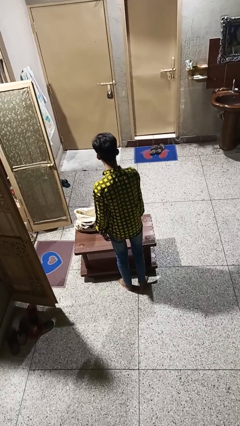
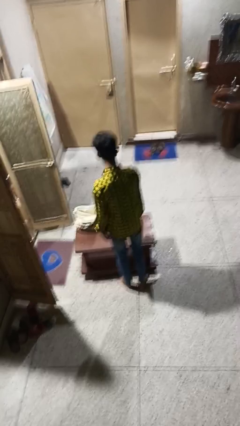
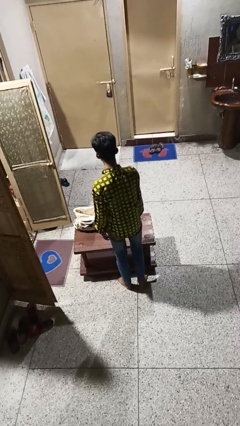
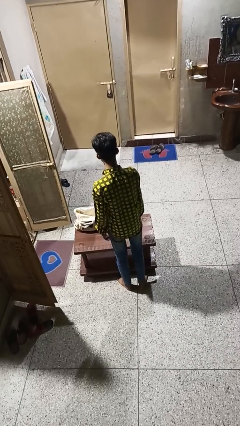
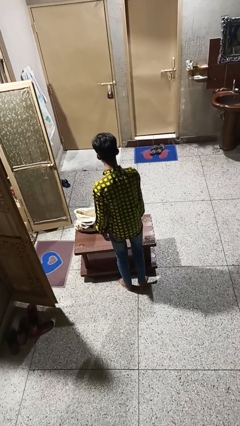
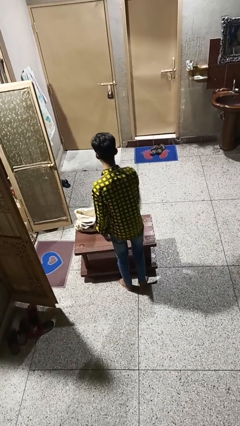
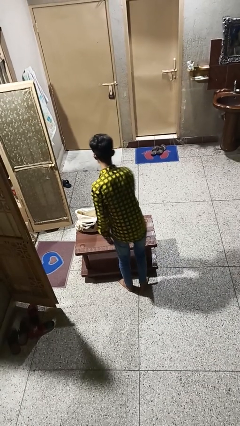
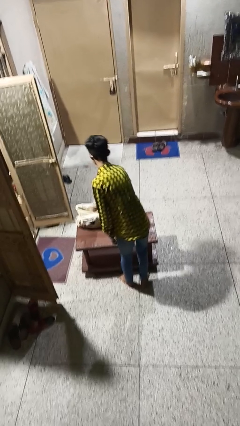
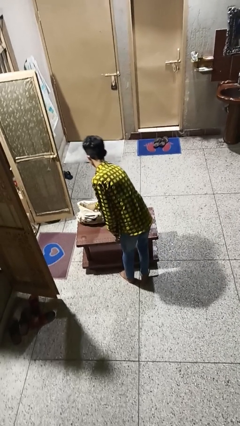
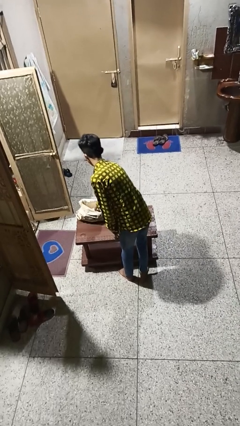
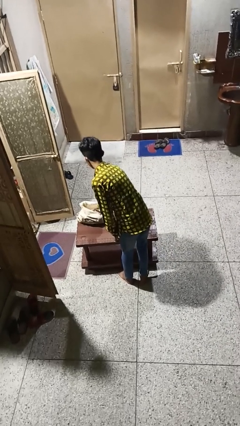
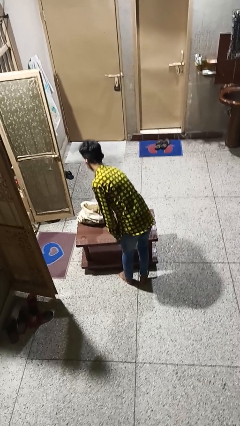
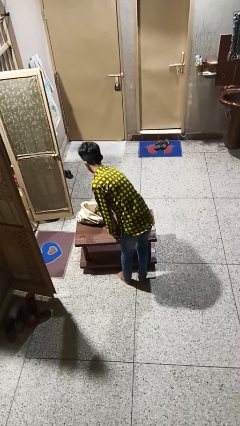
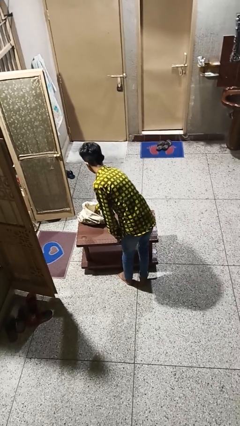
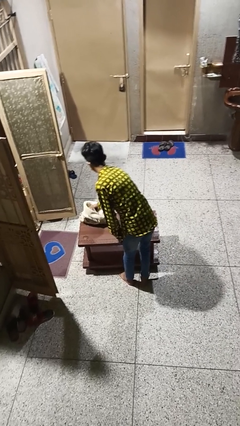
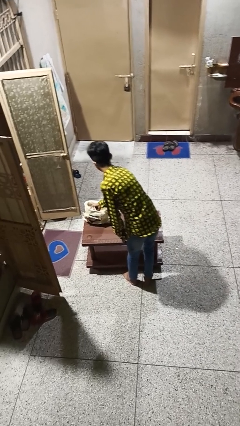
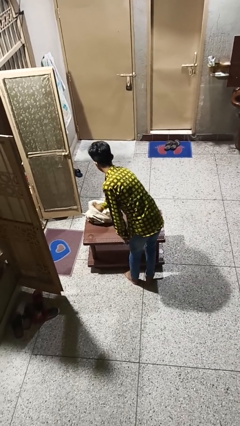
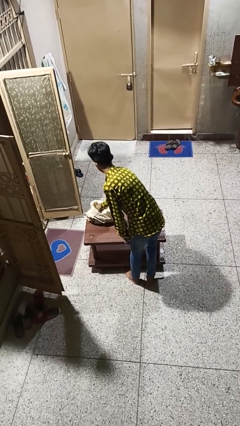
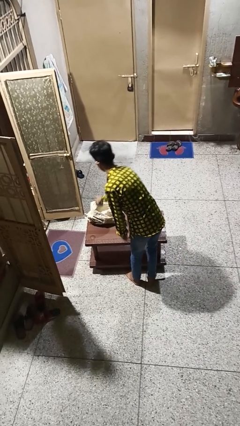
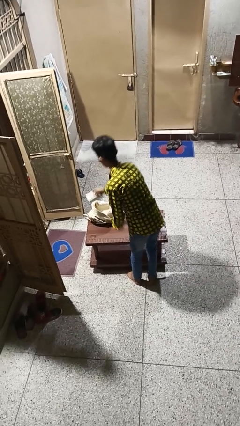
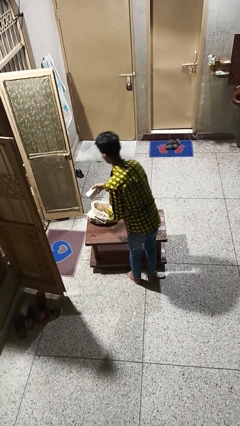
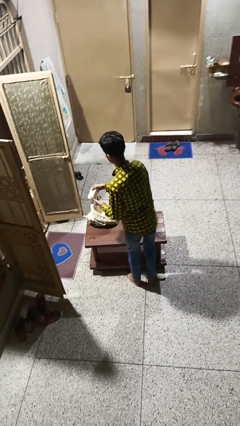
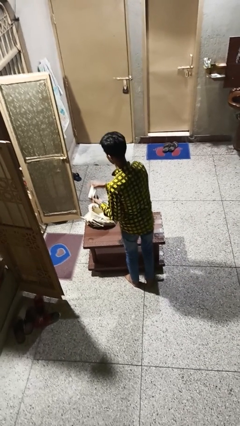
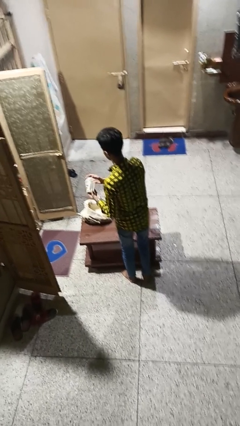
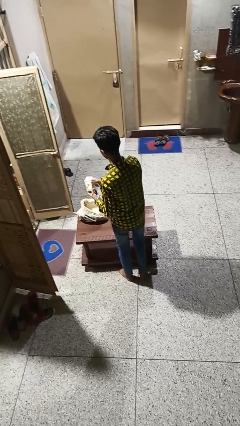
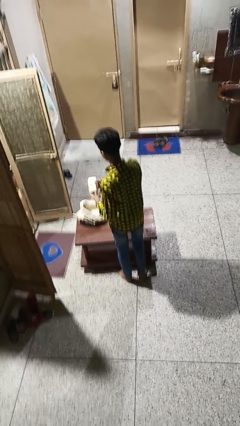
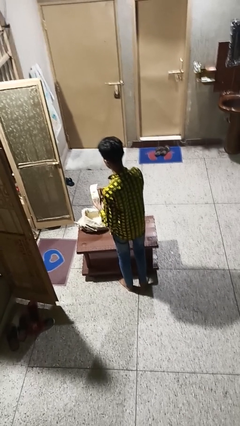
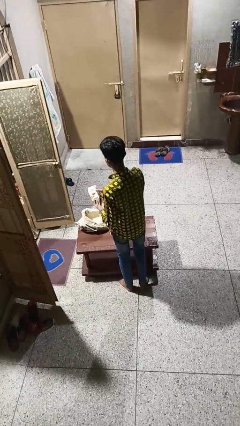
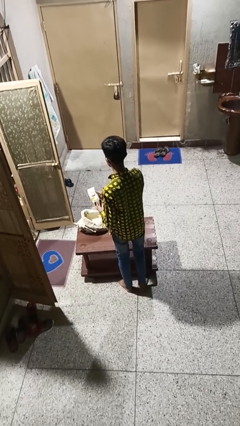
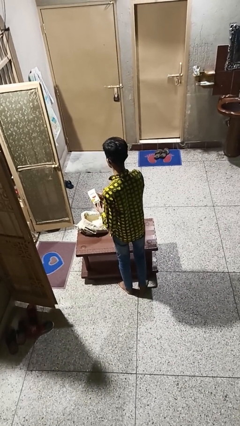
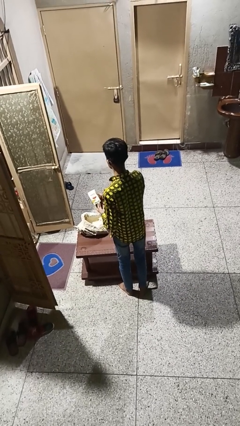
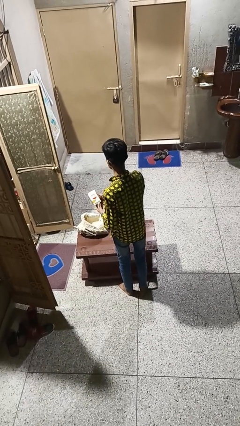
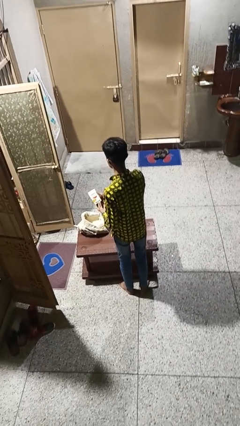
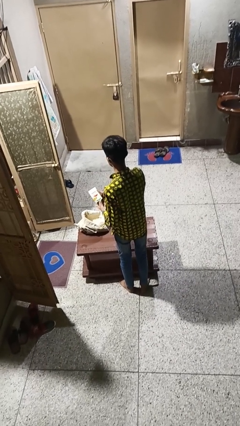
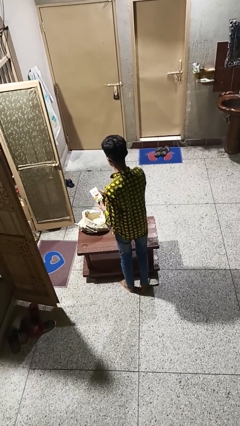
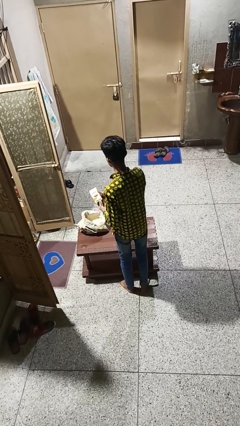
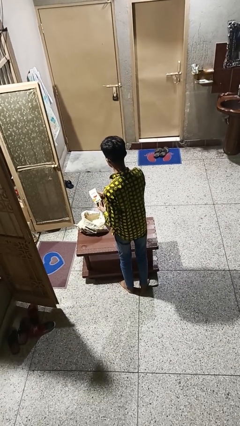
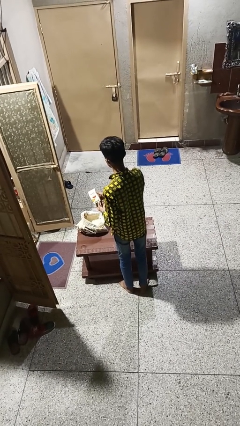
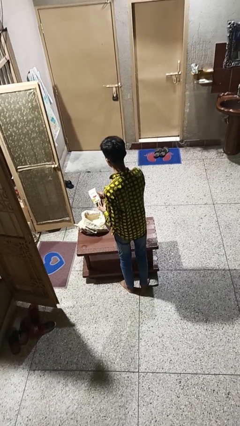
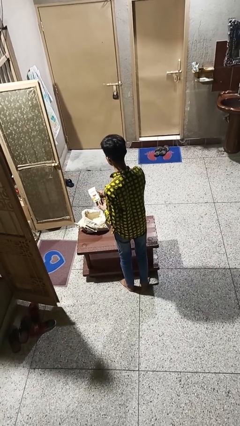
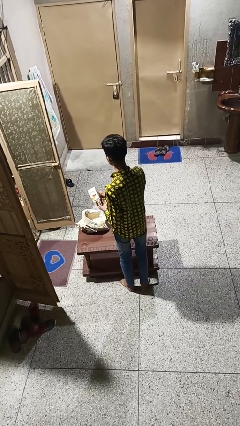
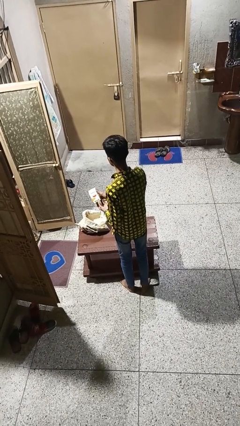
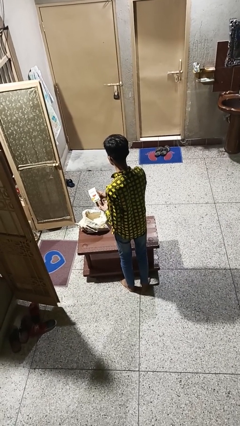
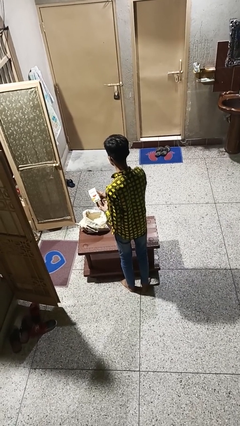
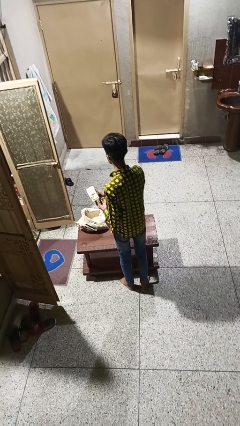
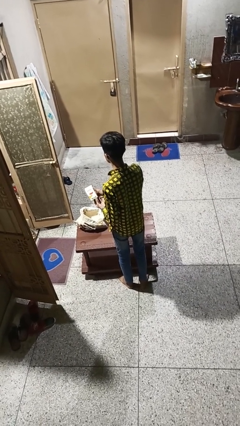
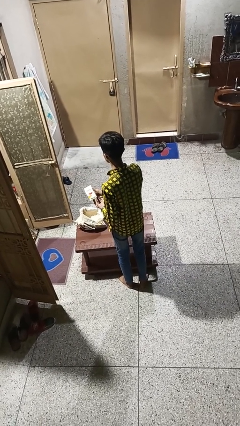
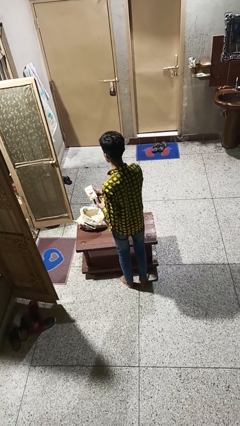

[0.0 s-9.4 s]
person takes object from bag

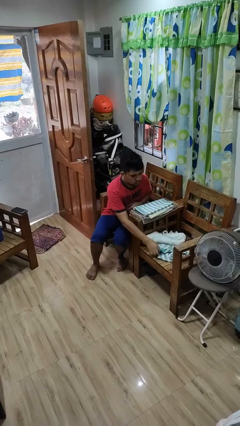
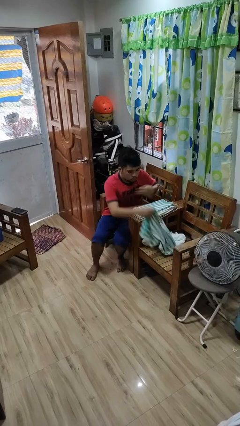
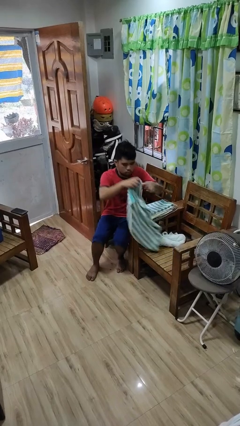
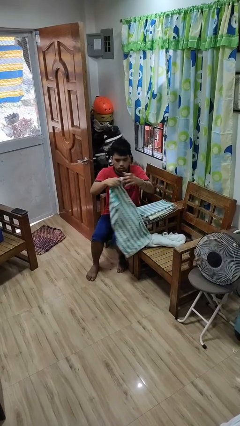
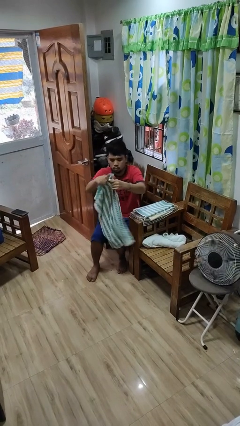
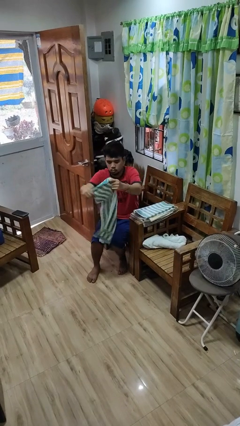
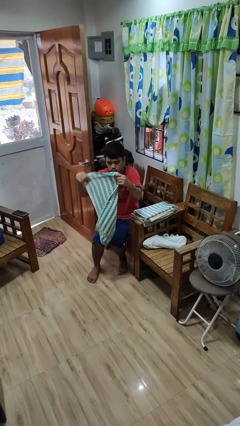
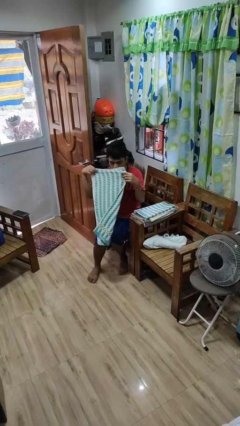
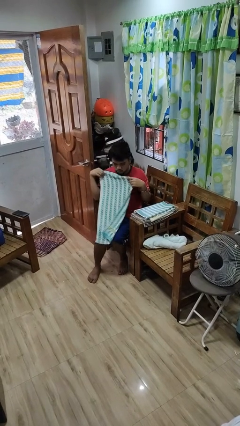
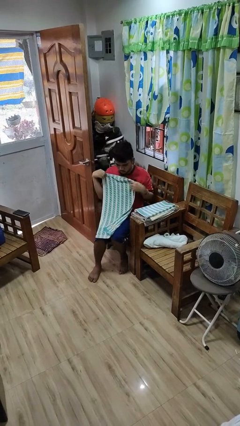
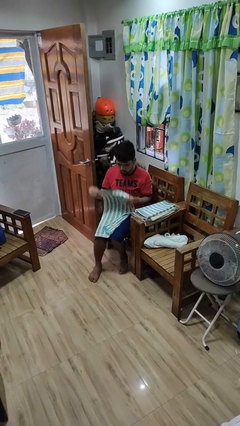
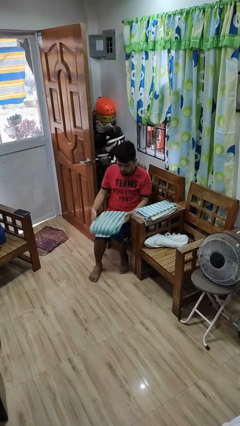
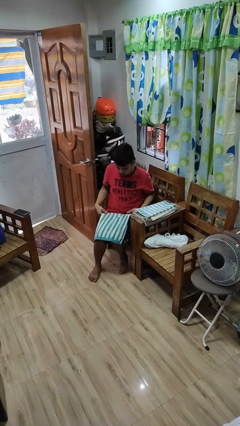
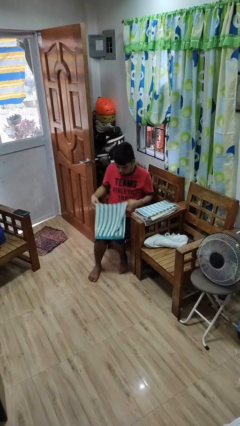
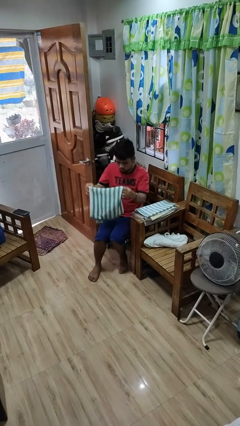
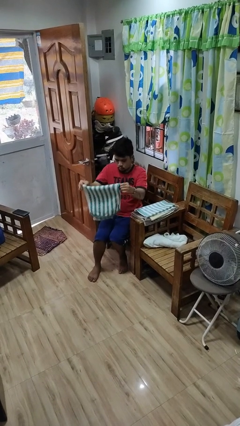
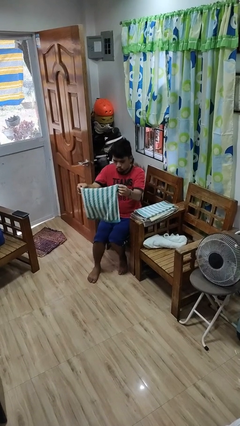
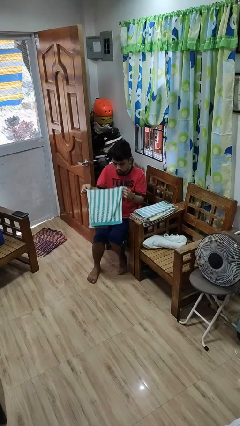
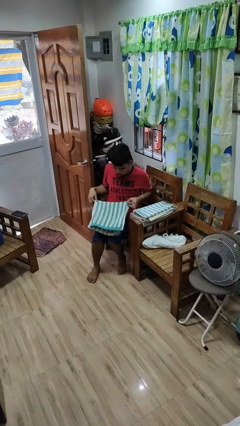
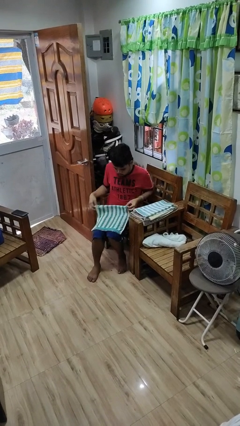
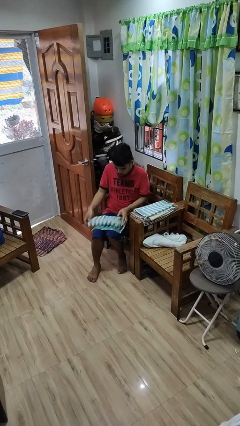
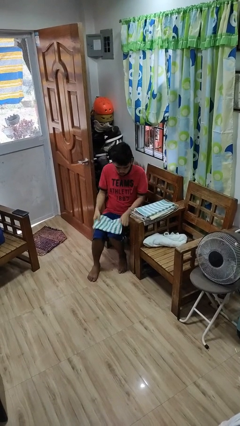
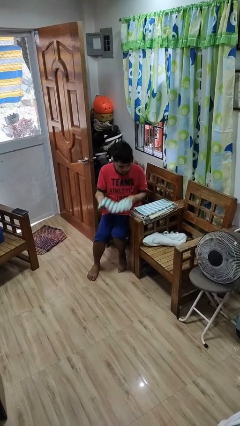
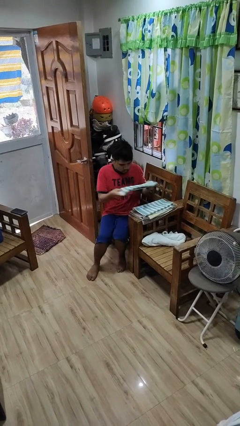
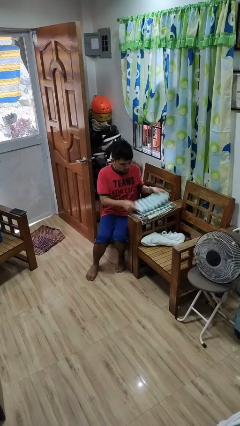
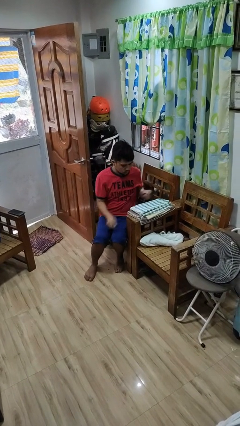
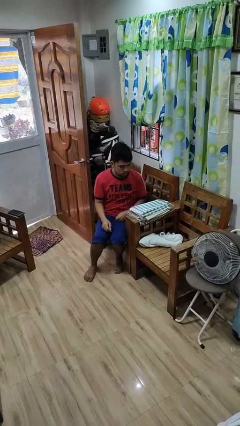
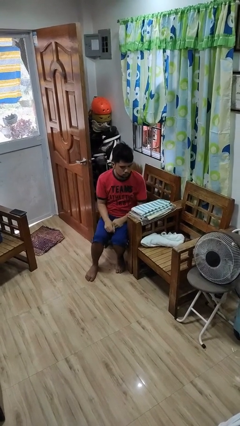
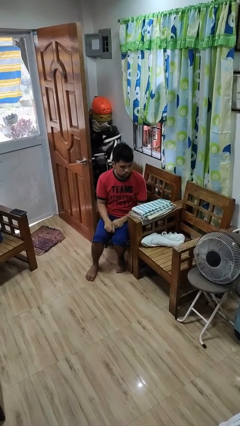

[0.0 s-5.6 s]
person folds towel

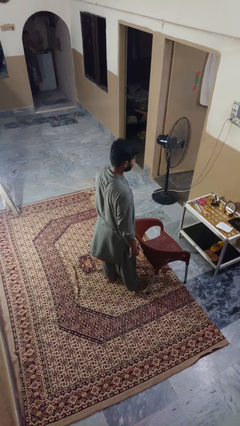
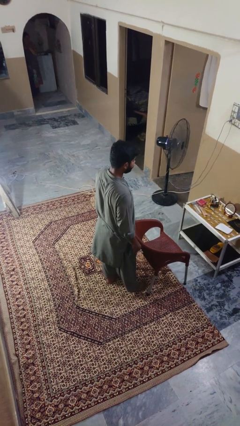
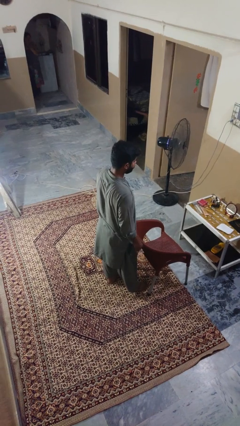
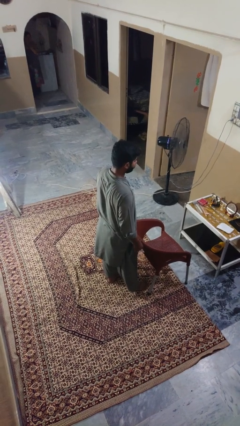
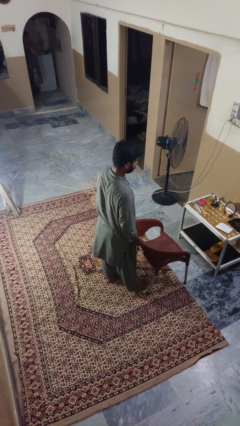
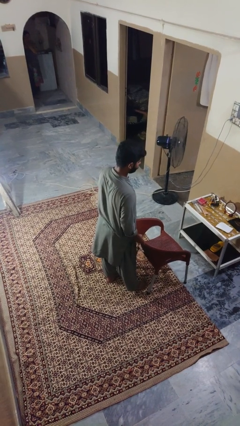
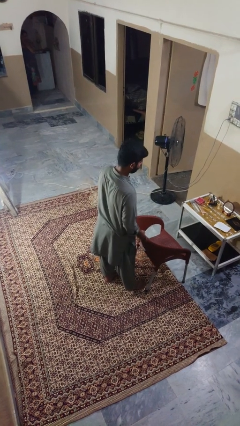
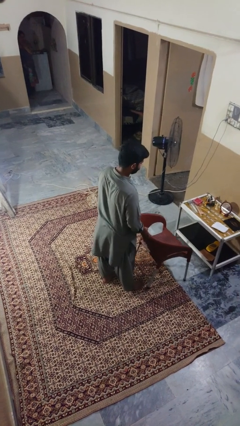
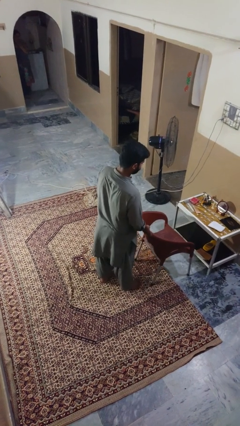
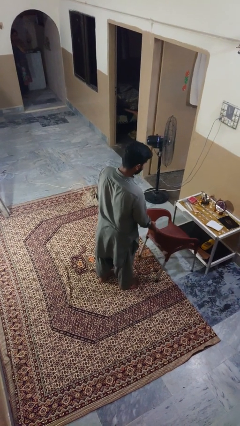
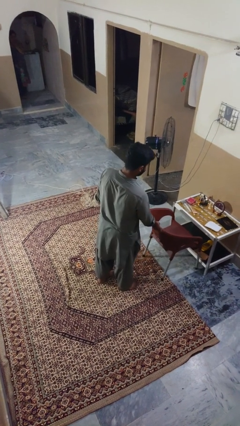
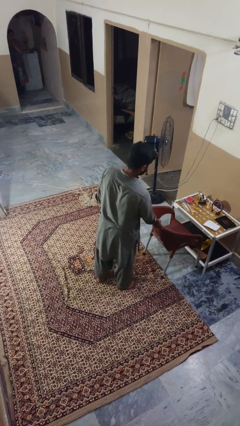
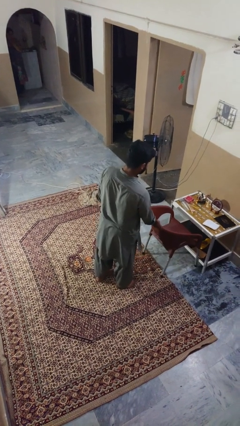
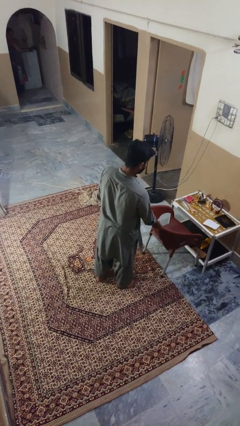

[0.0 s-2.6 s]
person pushes in chair
